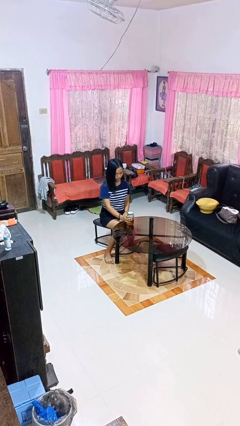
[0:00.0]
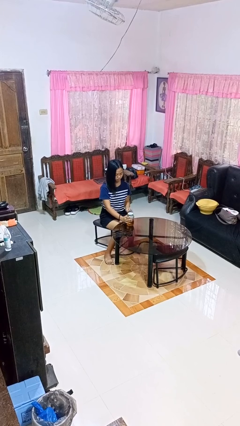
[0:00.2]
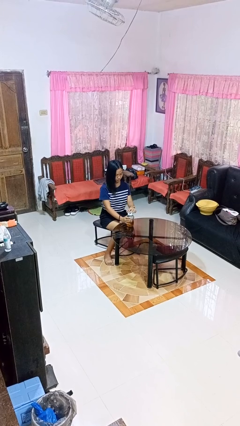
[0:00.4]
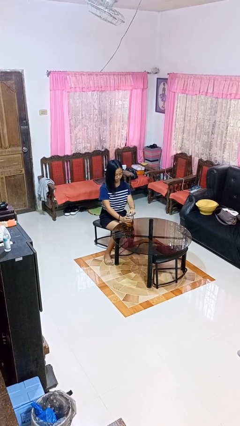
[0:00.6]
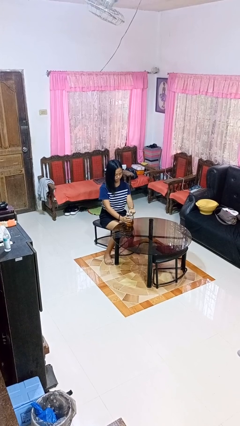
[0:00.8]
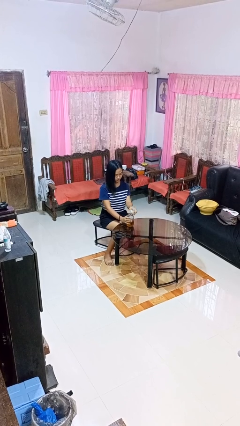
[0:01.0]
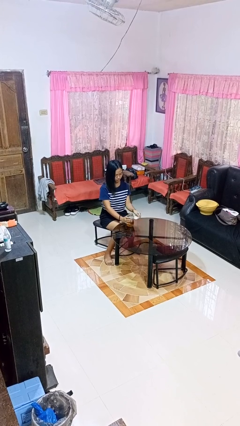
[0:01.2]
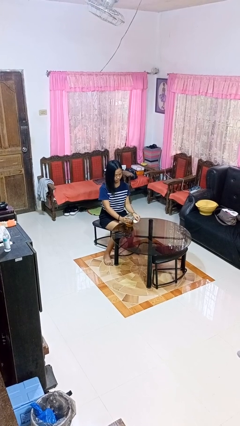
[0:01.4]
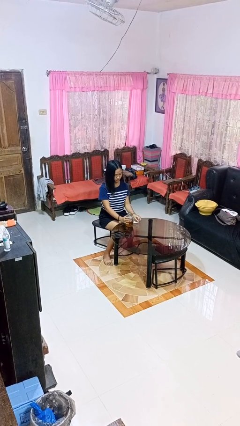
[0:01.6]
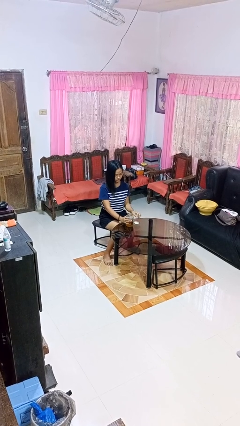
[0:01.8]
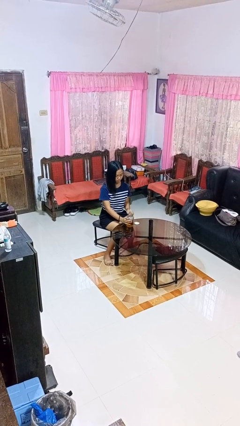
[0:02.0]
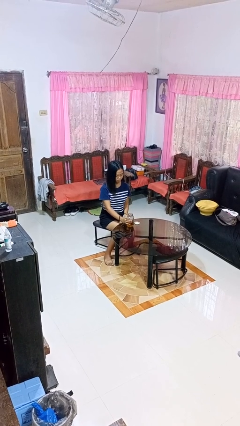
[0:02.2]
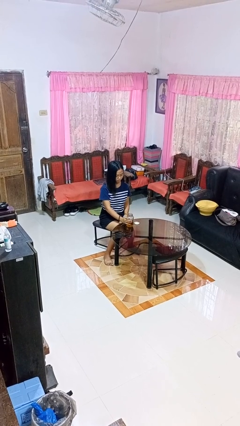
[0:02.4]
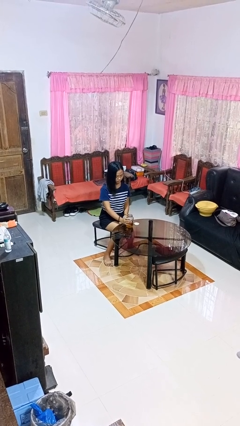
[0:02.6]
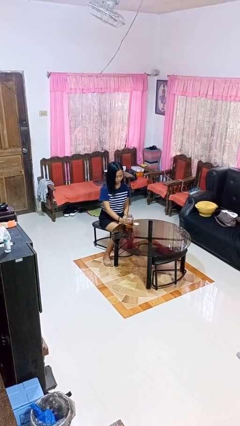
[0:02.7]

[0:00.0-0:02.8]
person opens jar

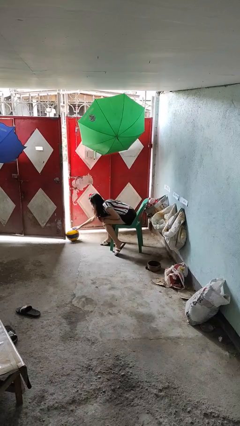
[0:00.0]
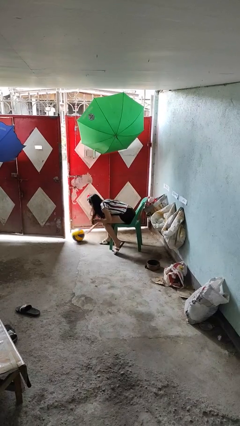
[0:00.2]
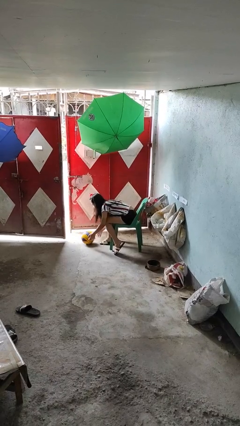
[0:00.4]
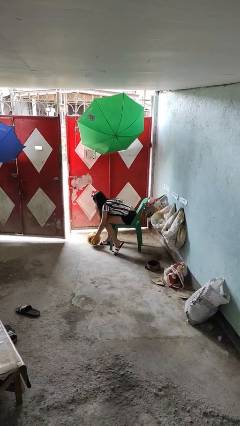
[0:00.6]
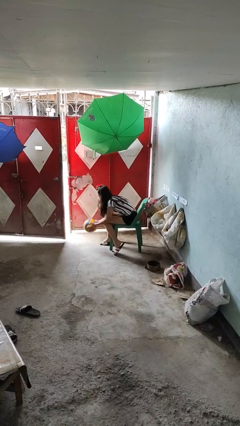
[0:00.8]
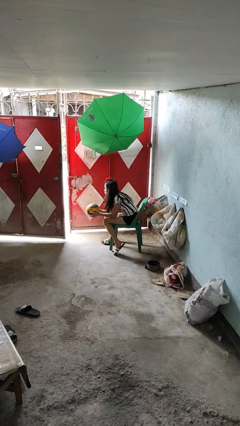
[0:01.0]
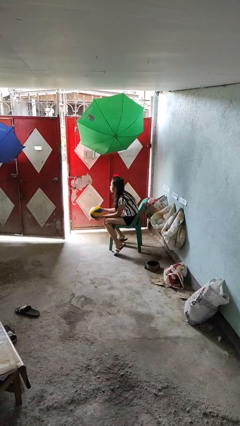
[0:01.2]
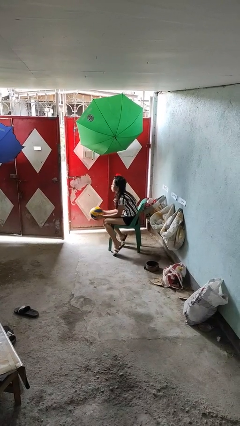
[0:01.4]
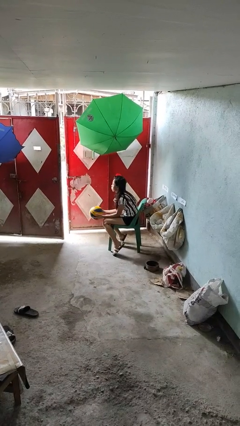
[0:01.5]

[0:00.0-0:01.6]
person picks up object from floor

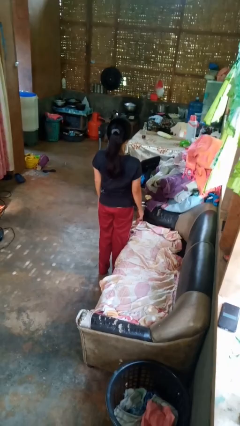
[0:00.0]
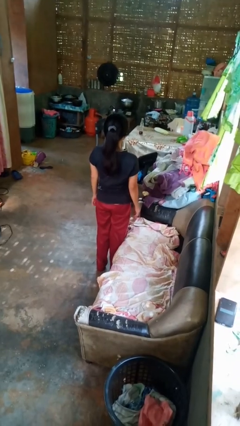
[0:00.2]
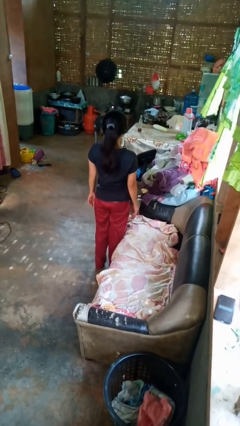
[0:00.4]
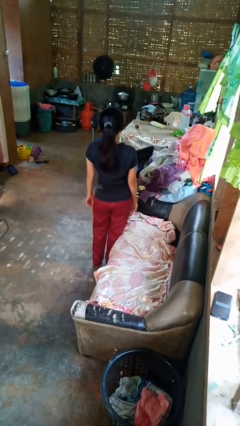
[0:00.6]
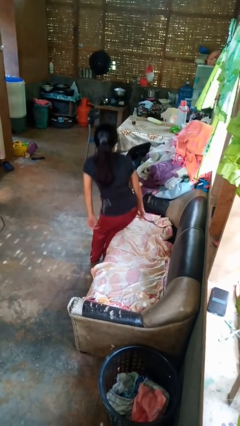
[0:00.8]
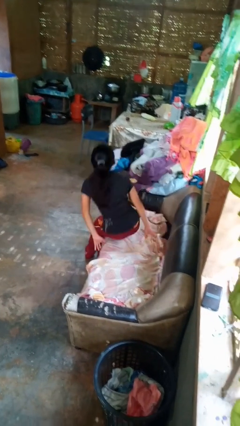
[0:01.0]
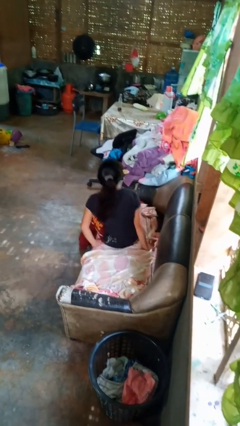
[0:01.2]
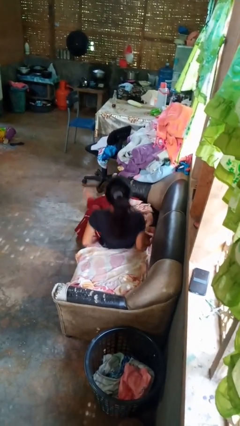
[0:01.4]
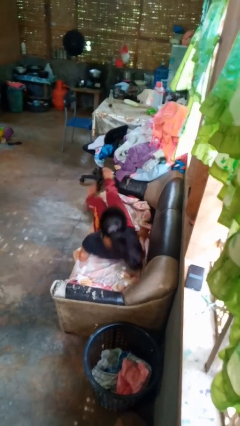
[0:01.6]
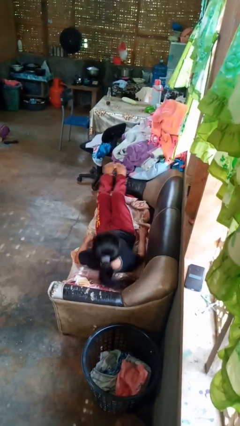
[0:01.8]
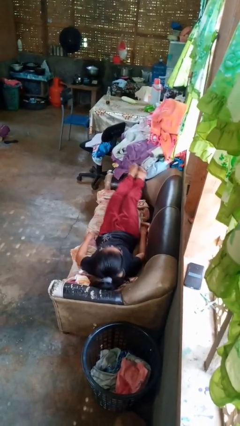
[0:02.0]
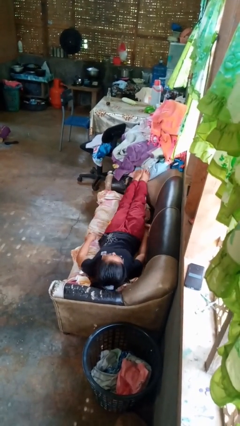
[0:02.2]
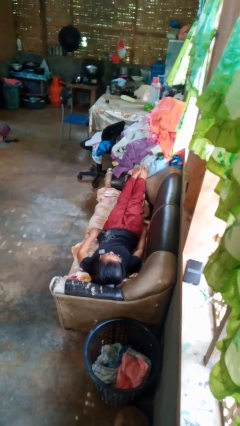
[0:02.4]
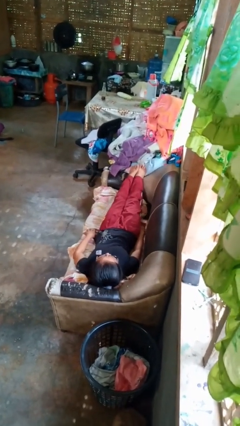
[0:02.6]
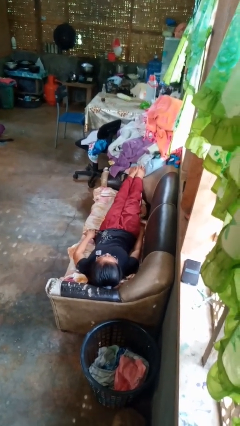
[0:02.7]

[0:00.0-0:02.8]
person lies down on couch

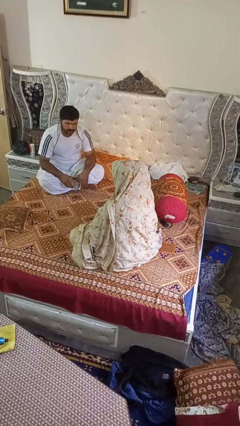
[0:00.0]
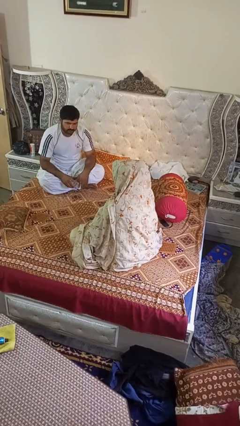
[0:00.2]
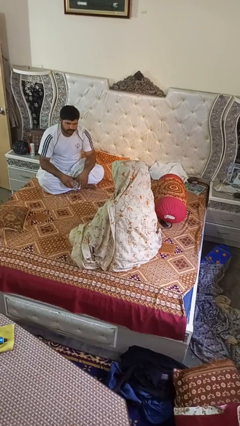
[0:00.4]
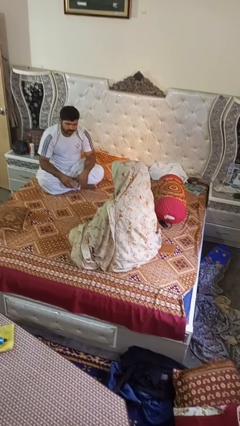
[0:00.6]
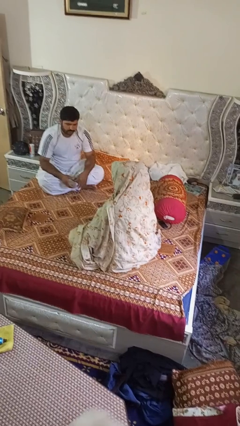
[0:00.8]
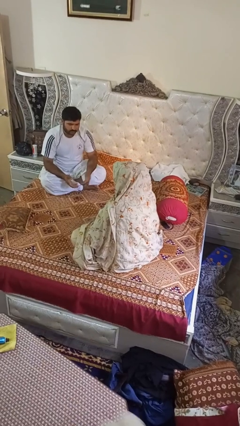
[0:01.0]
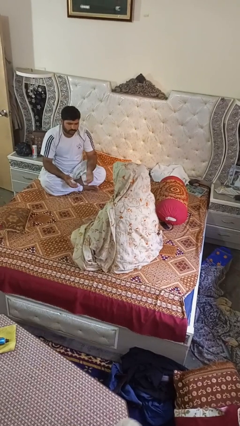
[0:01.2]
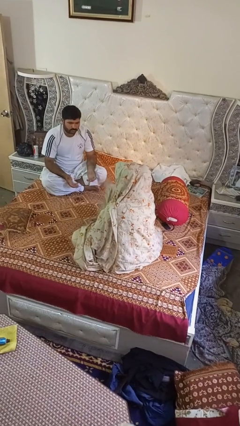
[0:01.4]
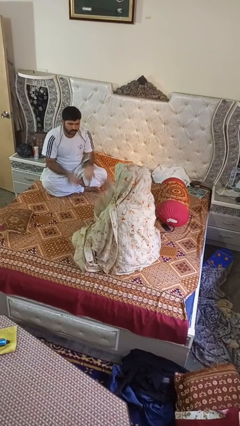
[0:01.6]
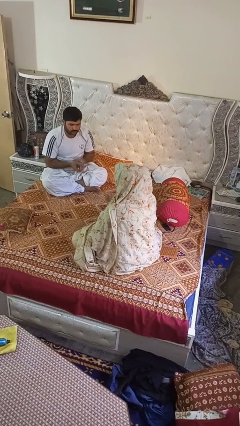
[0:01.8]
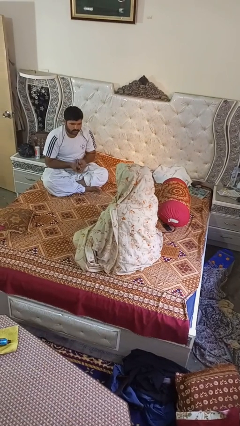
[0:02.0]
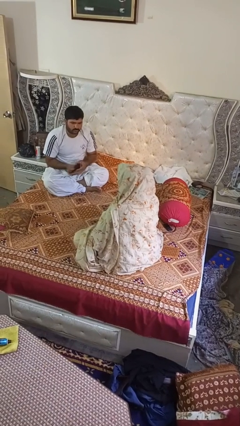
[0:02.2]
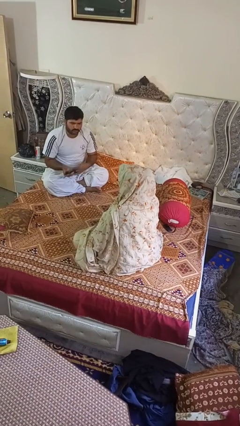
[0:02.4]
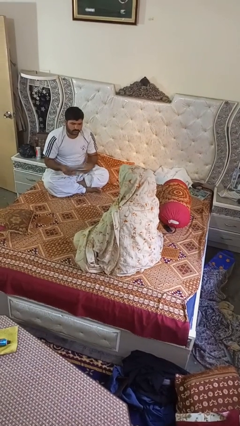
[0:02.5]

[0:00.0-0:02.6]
person throws object to person

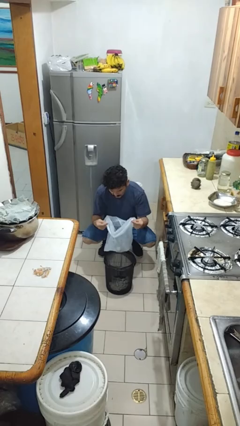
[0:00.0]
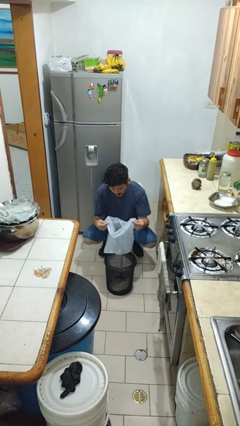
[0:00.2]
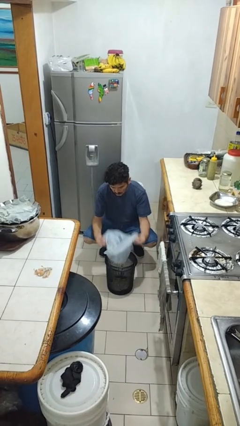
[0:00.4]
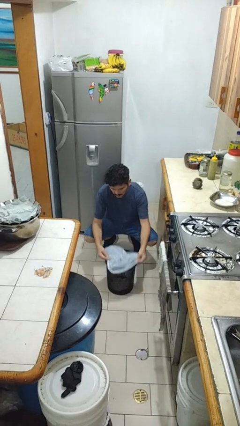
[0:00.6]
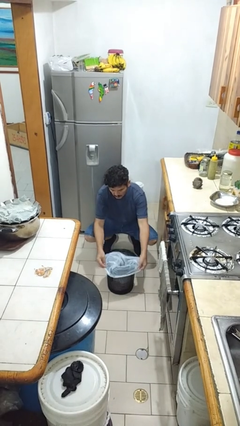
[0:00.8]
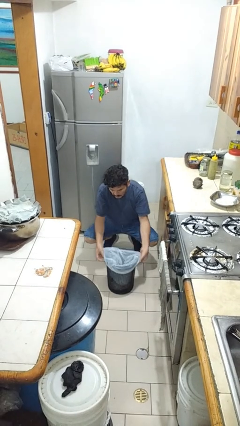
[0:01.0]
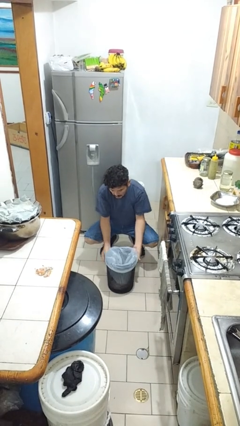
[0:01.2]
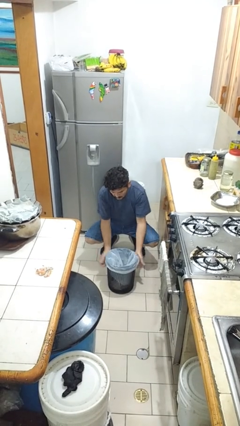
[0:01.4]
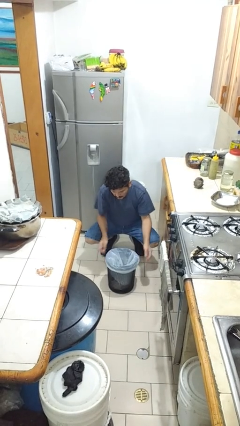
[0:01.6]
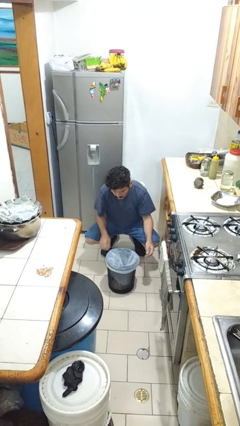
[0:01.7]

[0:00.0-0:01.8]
person inserts trashbag into trashcan

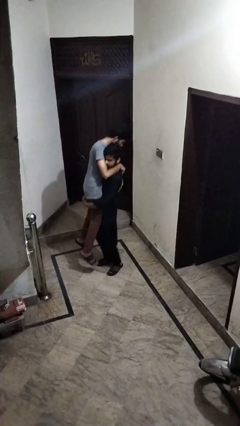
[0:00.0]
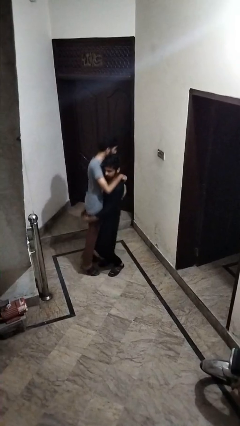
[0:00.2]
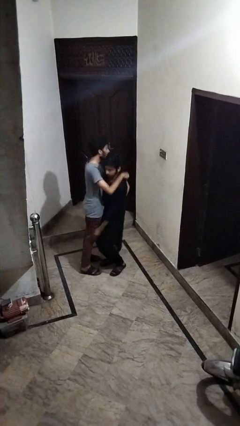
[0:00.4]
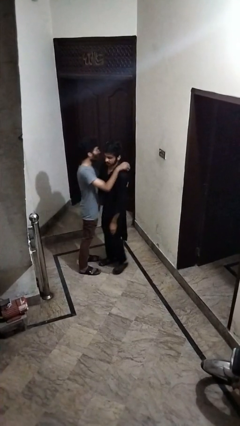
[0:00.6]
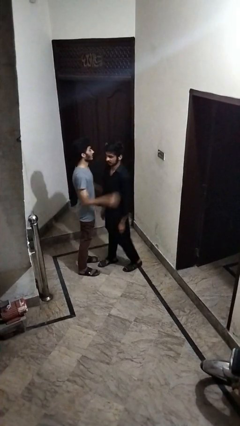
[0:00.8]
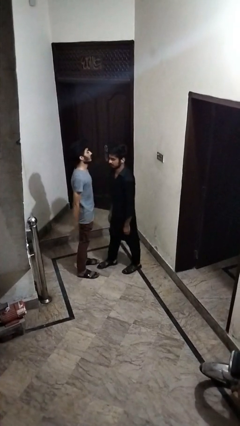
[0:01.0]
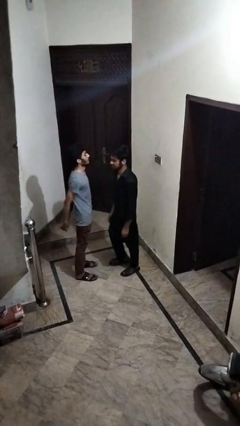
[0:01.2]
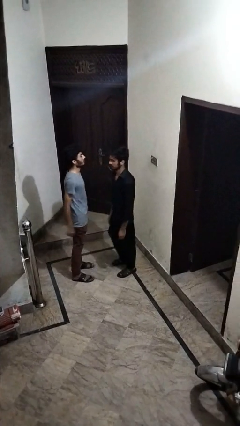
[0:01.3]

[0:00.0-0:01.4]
person puts down person

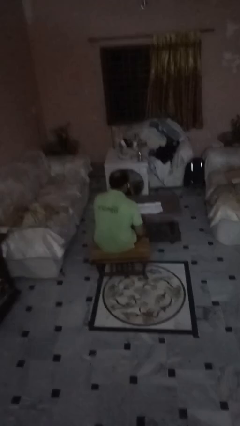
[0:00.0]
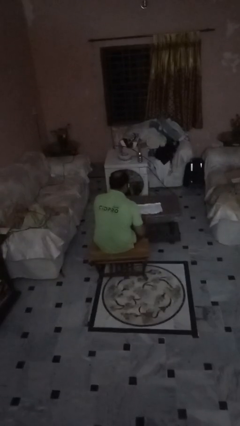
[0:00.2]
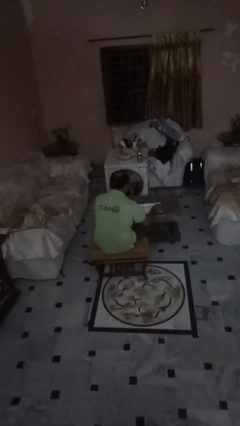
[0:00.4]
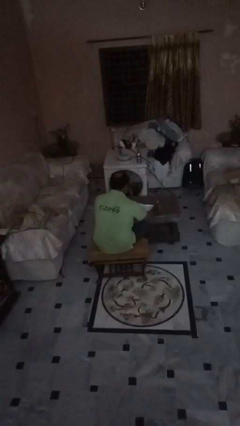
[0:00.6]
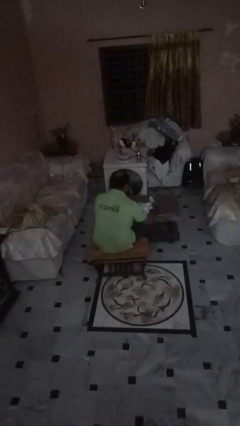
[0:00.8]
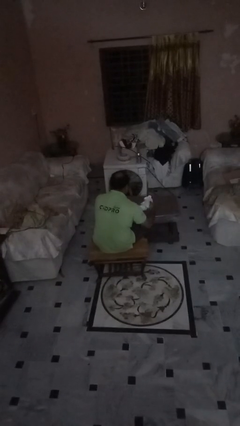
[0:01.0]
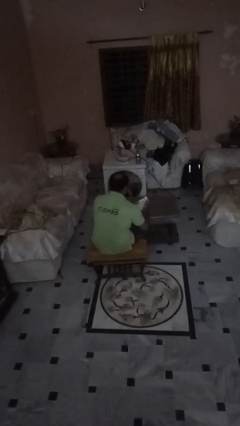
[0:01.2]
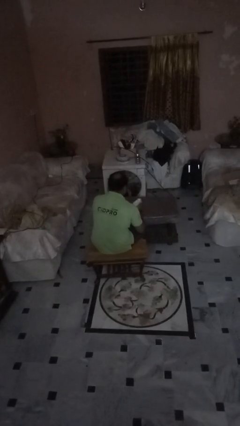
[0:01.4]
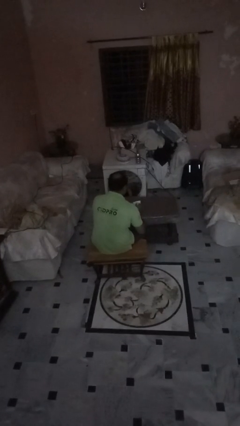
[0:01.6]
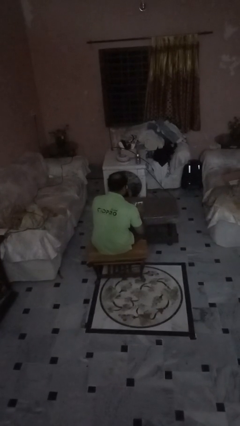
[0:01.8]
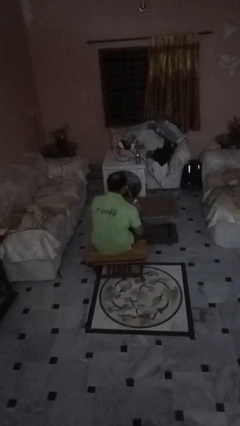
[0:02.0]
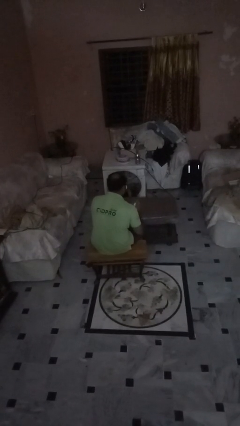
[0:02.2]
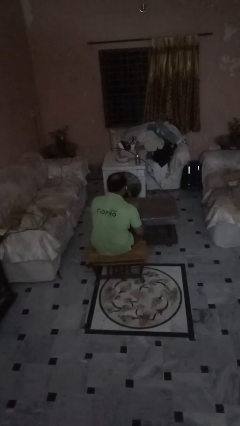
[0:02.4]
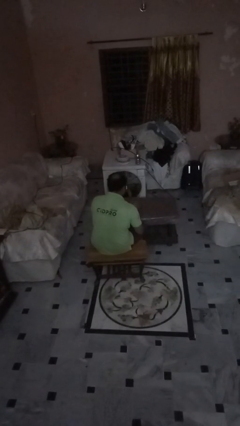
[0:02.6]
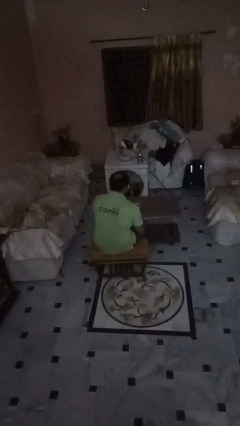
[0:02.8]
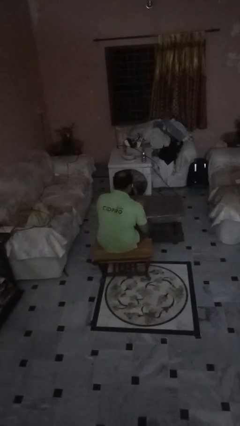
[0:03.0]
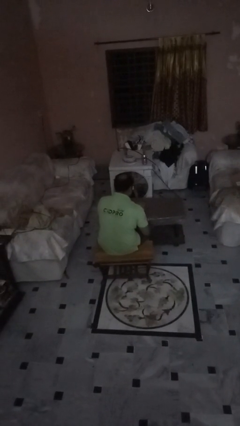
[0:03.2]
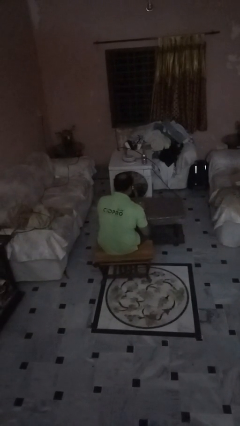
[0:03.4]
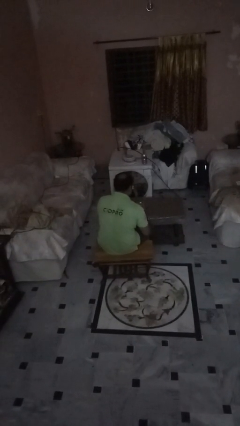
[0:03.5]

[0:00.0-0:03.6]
person crumples paper
